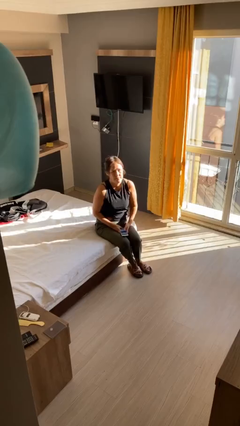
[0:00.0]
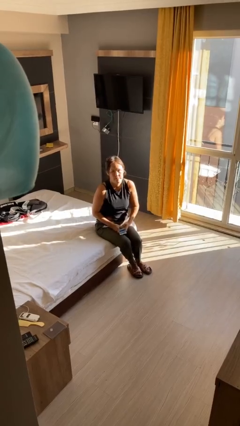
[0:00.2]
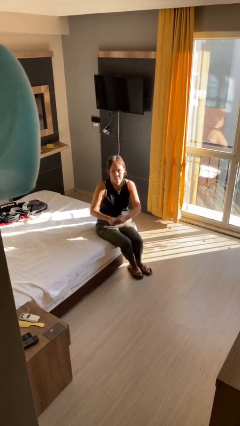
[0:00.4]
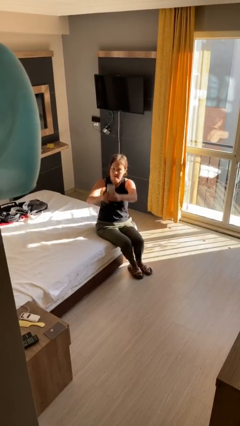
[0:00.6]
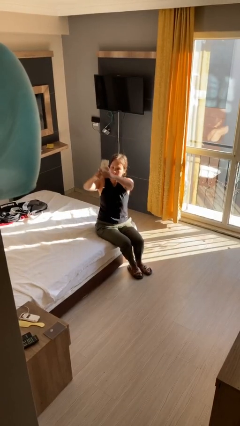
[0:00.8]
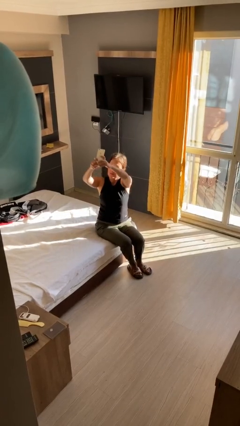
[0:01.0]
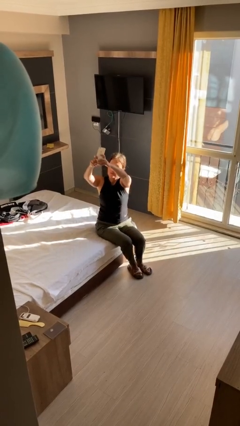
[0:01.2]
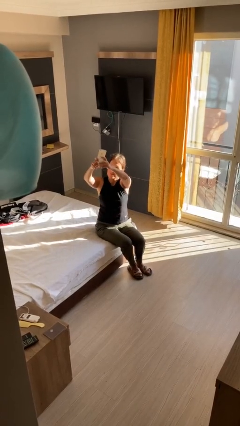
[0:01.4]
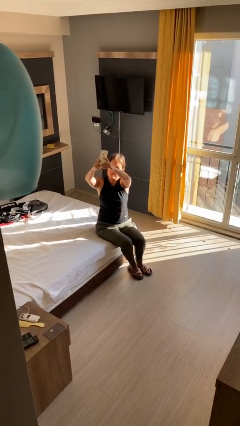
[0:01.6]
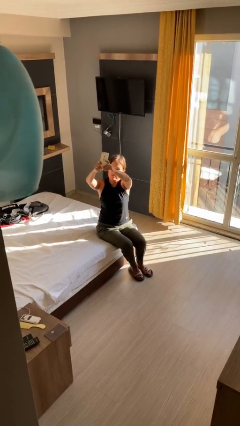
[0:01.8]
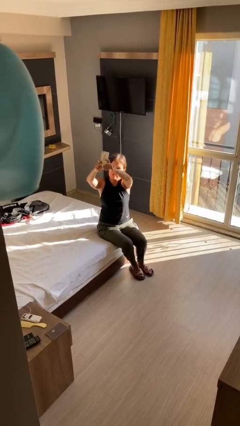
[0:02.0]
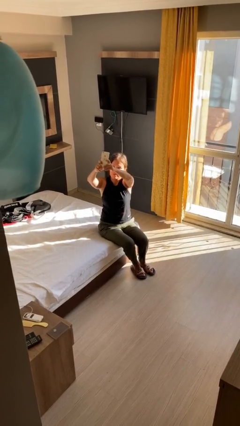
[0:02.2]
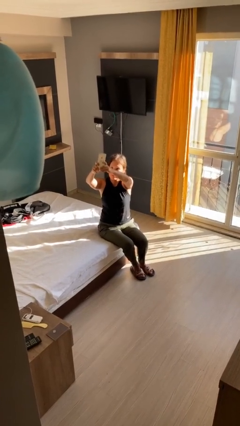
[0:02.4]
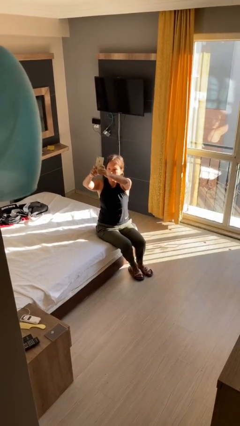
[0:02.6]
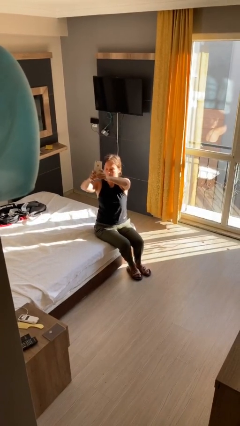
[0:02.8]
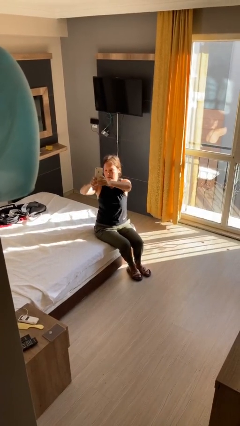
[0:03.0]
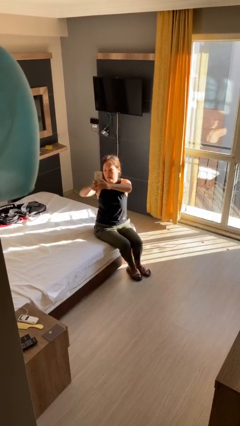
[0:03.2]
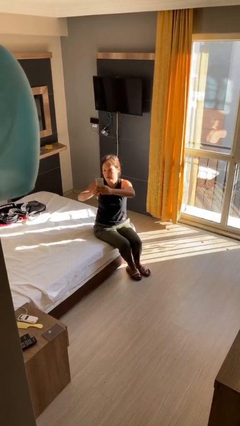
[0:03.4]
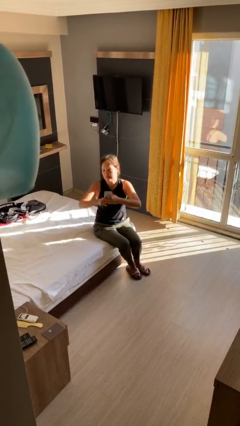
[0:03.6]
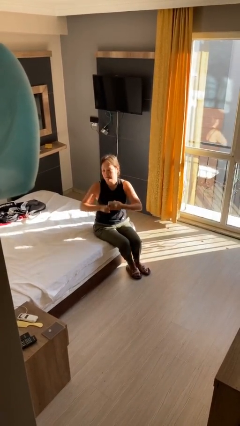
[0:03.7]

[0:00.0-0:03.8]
person takes selfie

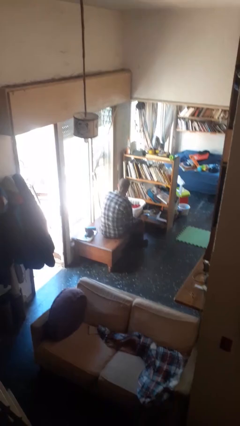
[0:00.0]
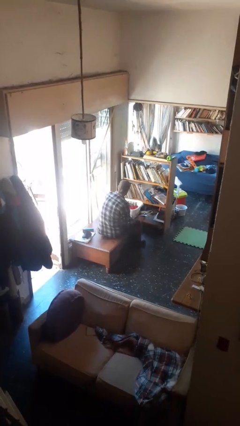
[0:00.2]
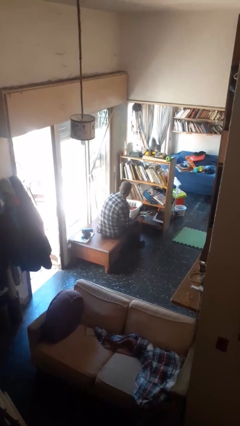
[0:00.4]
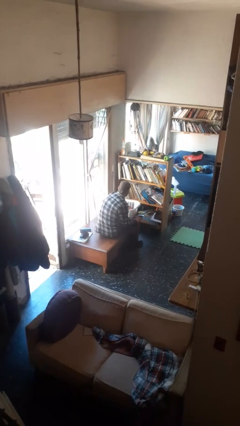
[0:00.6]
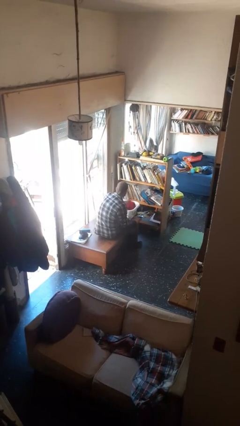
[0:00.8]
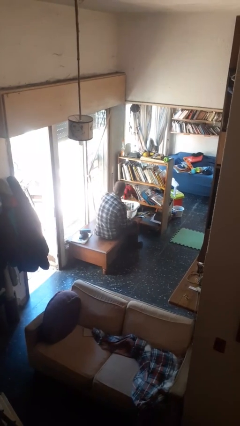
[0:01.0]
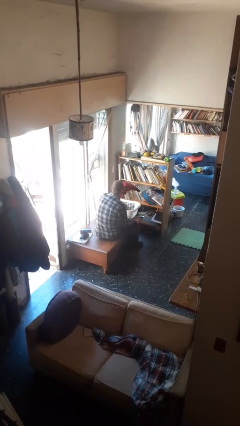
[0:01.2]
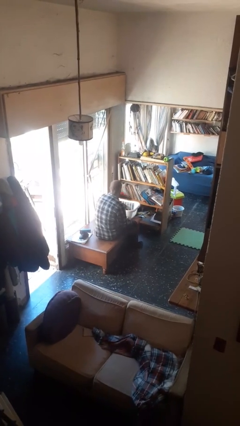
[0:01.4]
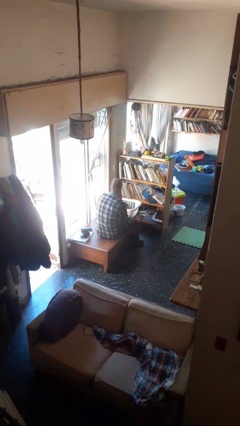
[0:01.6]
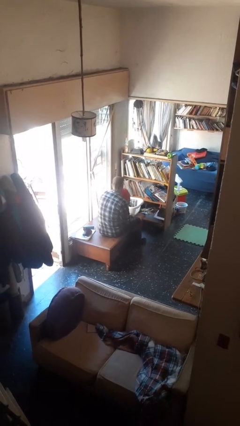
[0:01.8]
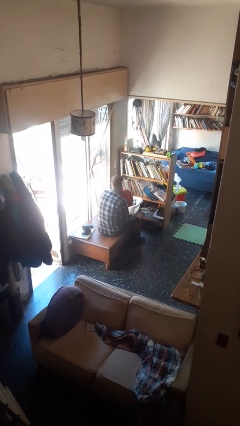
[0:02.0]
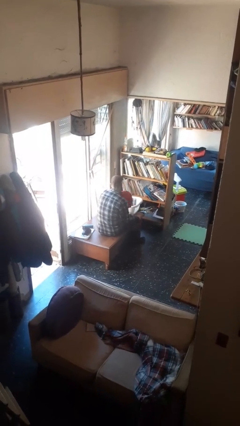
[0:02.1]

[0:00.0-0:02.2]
person takes object from basket

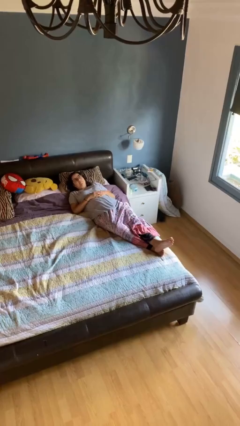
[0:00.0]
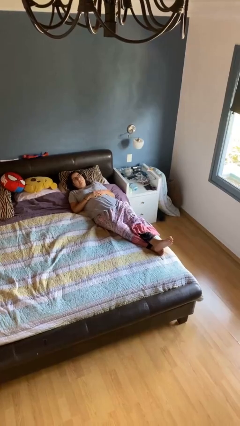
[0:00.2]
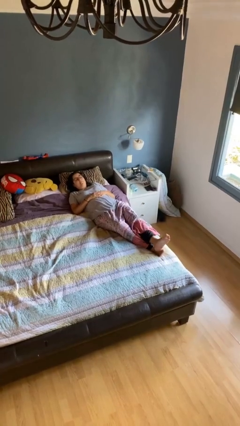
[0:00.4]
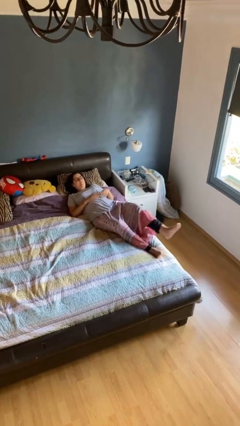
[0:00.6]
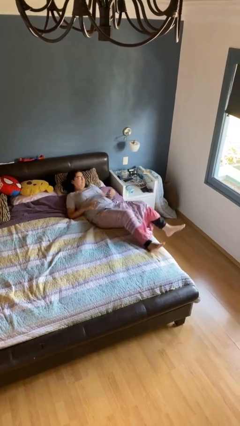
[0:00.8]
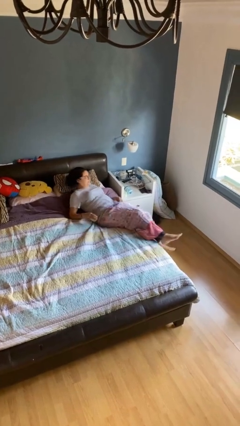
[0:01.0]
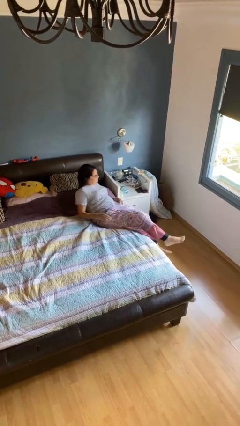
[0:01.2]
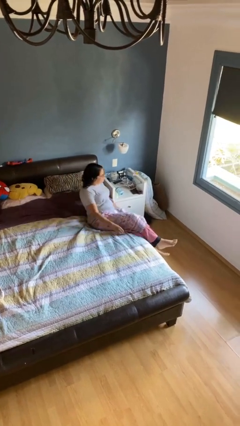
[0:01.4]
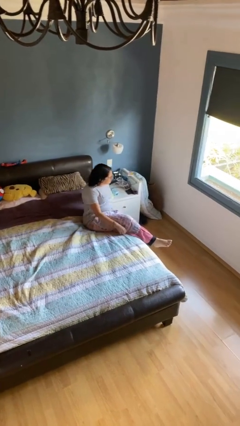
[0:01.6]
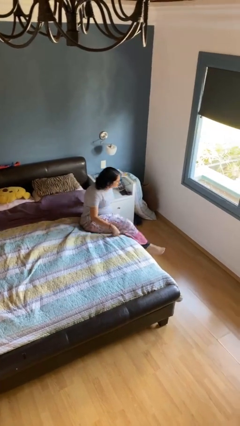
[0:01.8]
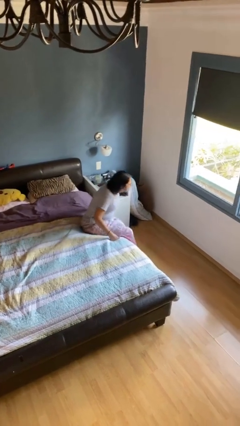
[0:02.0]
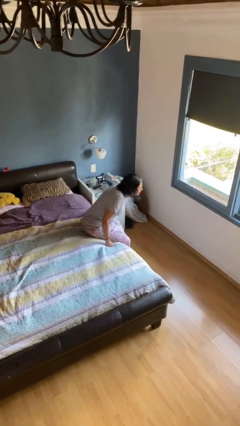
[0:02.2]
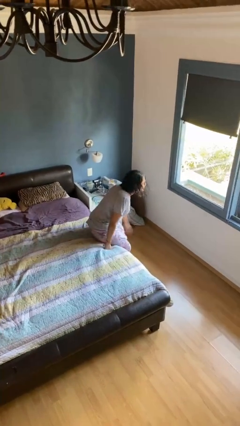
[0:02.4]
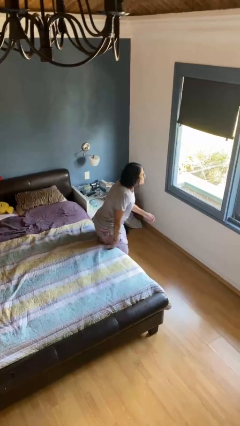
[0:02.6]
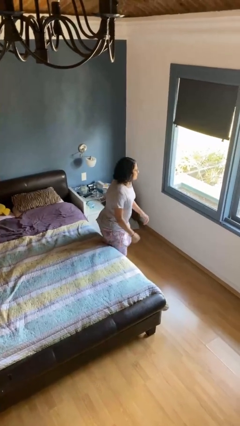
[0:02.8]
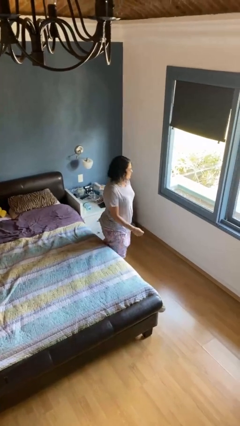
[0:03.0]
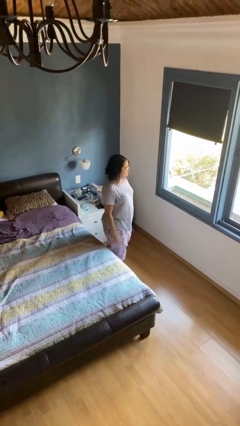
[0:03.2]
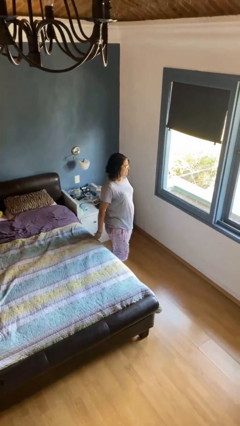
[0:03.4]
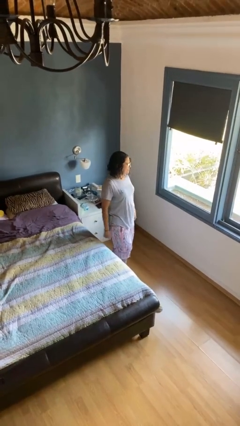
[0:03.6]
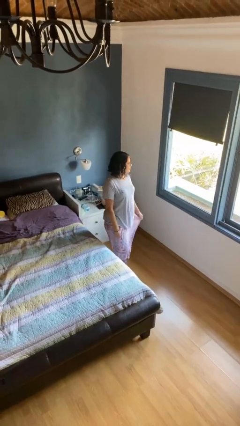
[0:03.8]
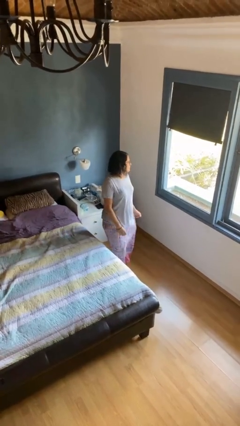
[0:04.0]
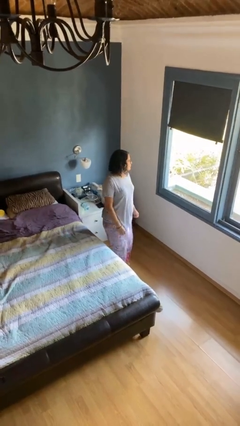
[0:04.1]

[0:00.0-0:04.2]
person stands up

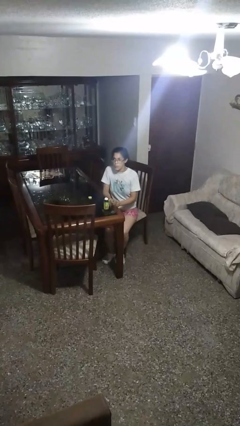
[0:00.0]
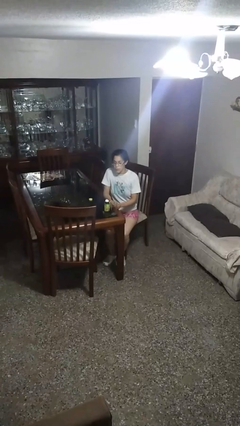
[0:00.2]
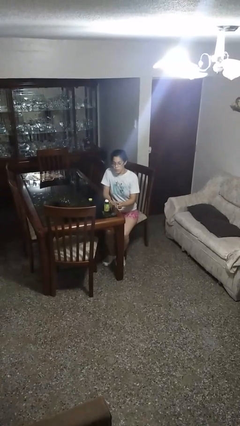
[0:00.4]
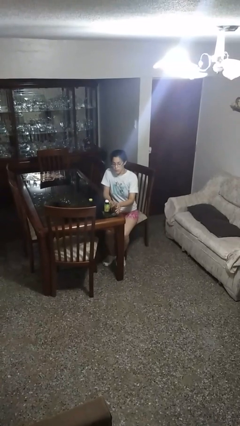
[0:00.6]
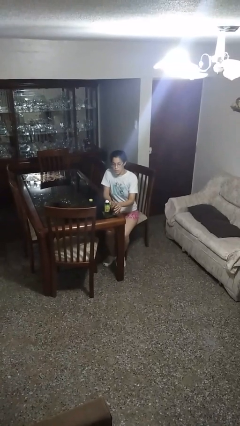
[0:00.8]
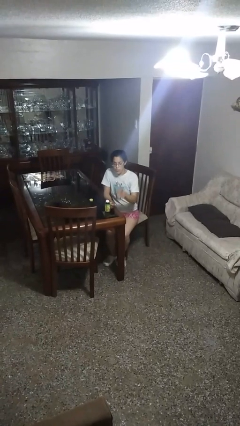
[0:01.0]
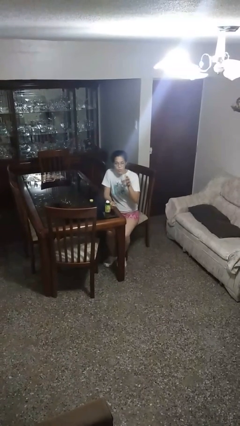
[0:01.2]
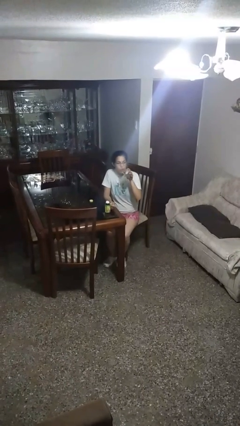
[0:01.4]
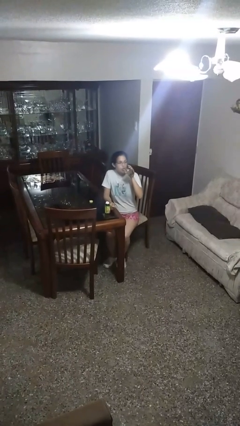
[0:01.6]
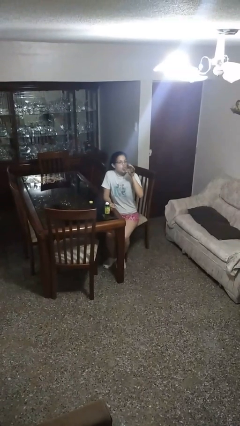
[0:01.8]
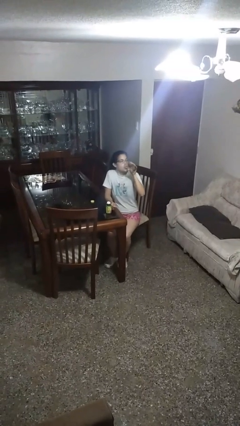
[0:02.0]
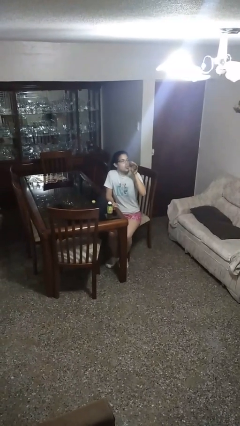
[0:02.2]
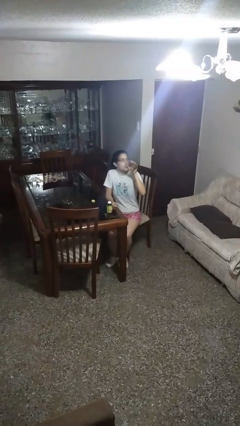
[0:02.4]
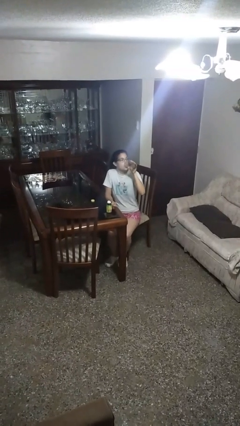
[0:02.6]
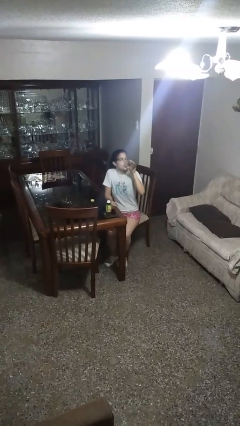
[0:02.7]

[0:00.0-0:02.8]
person drinks from cup

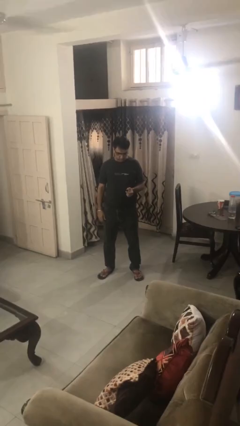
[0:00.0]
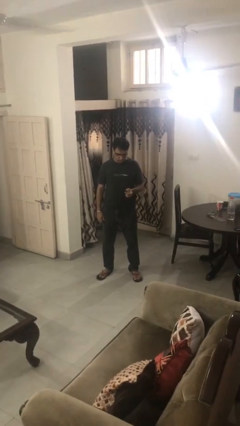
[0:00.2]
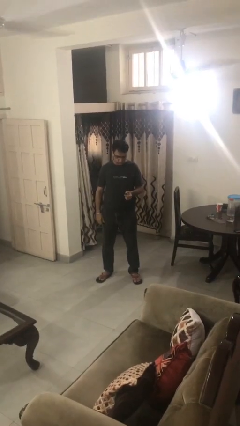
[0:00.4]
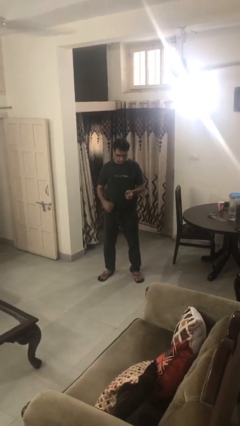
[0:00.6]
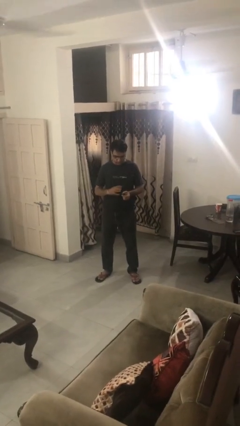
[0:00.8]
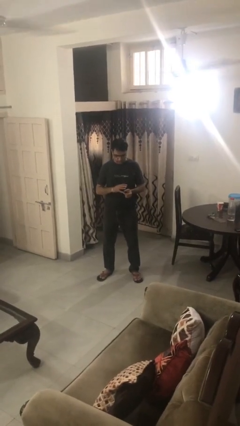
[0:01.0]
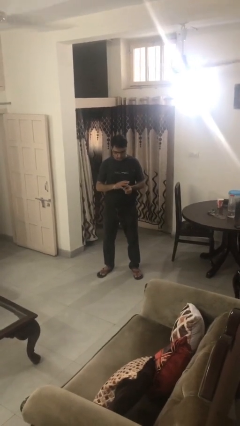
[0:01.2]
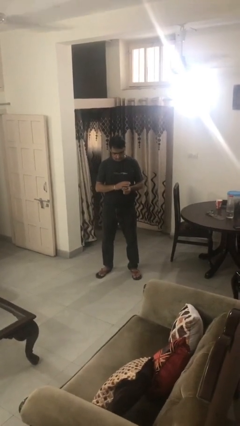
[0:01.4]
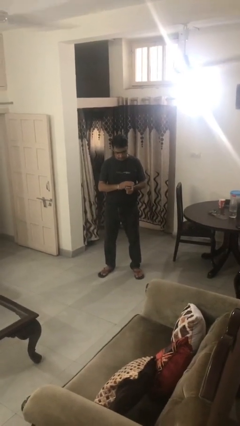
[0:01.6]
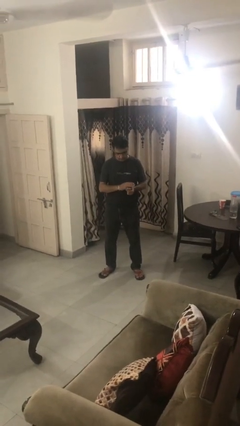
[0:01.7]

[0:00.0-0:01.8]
person puts on ring

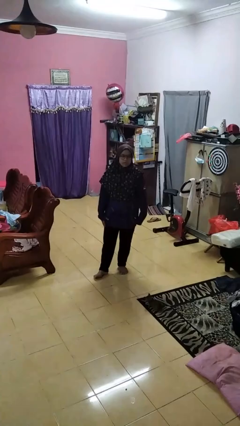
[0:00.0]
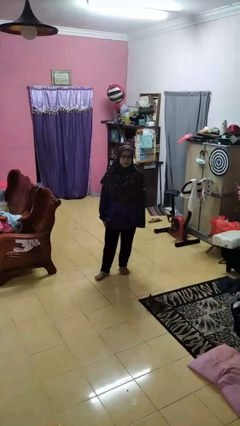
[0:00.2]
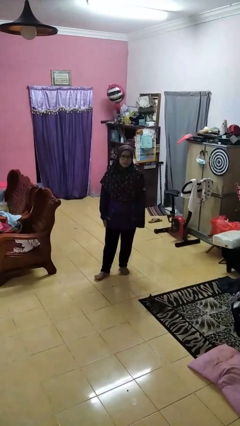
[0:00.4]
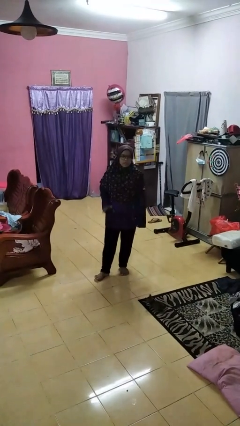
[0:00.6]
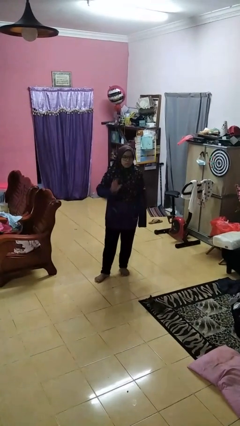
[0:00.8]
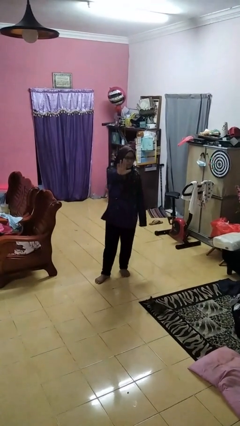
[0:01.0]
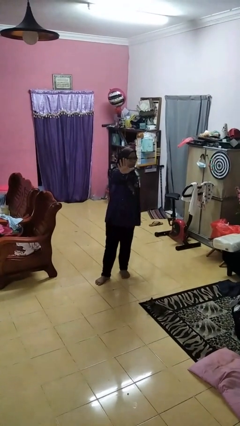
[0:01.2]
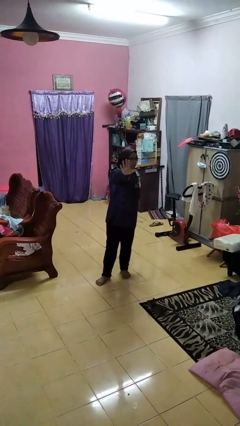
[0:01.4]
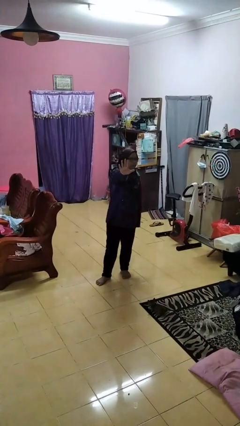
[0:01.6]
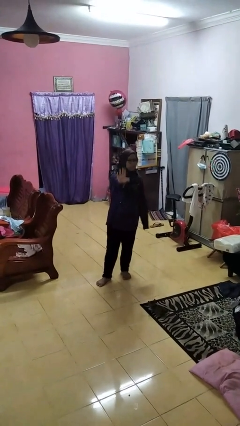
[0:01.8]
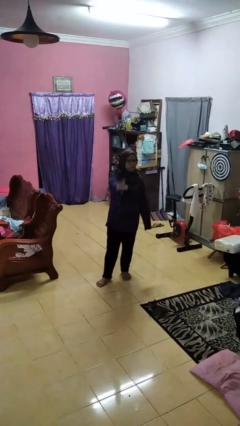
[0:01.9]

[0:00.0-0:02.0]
person gestures stop

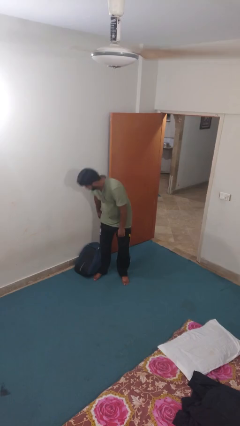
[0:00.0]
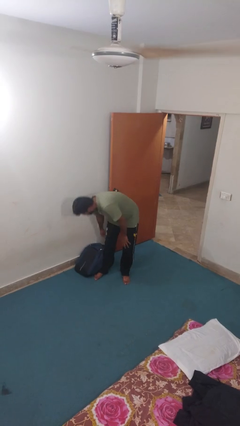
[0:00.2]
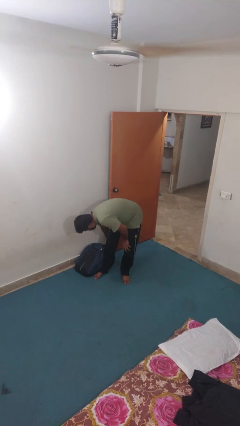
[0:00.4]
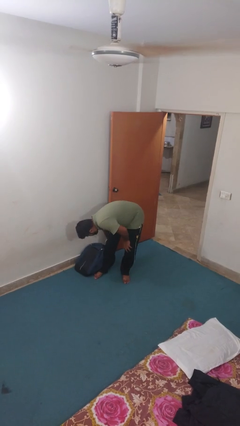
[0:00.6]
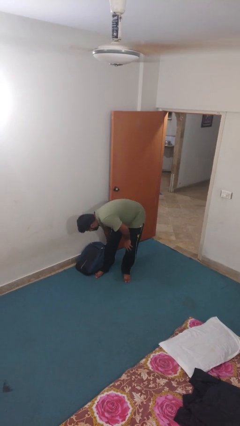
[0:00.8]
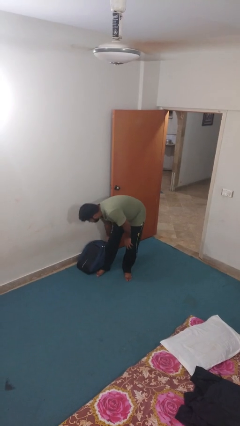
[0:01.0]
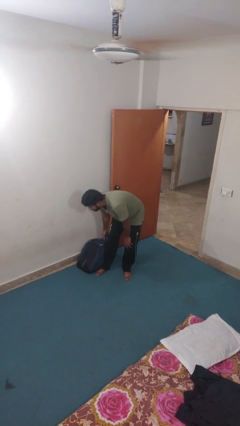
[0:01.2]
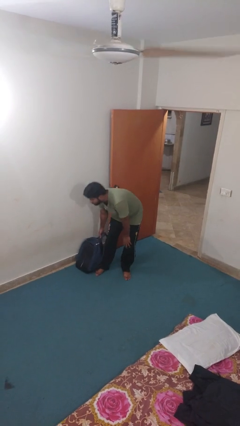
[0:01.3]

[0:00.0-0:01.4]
person picks up object from floor
